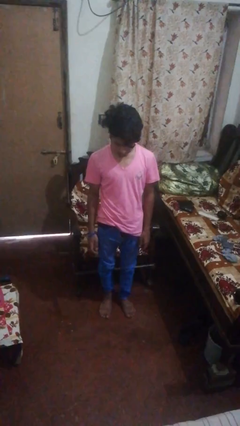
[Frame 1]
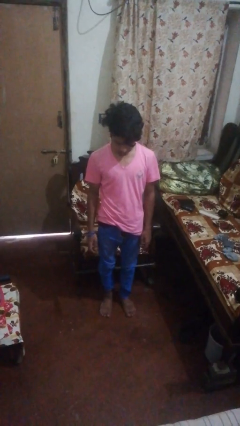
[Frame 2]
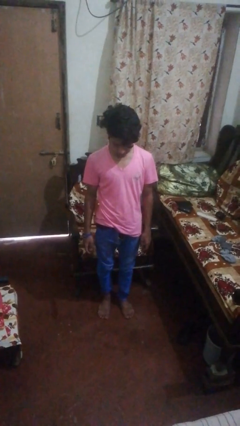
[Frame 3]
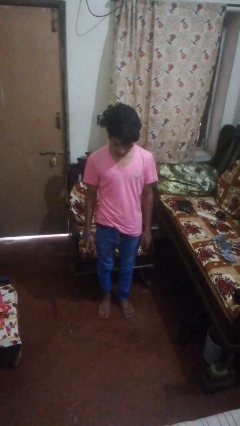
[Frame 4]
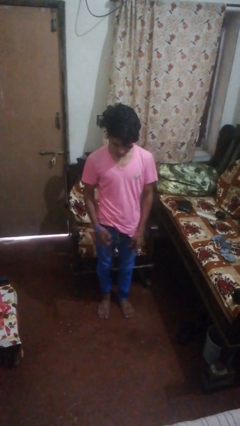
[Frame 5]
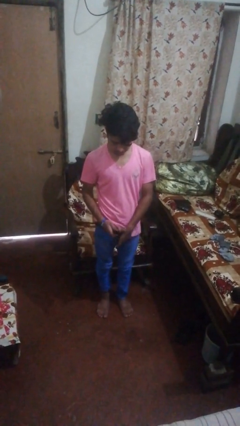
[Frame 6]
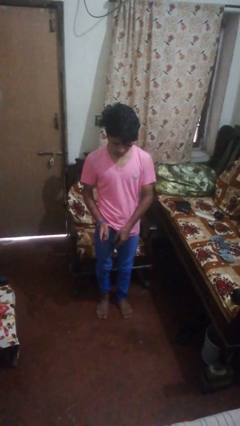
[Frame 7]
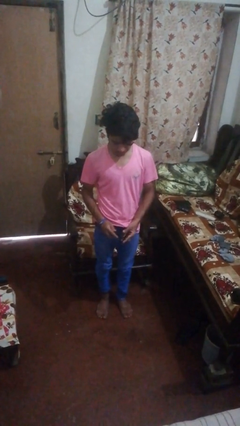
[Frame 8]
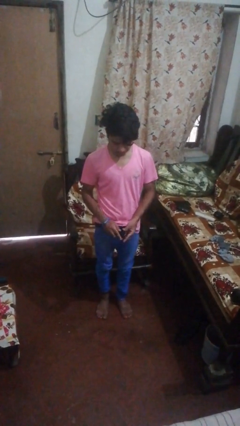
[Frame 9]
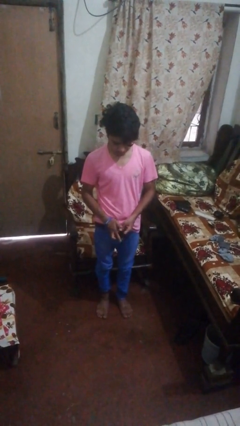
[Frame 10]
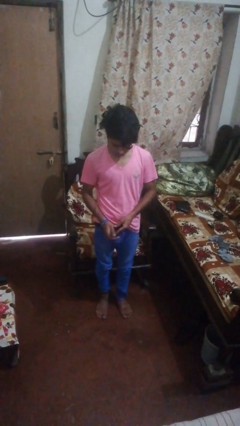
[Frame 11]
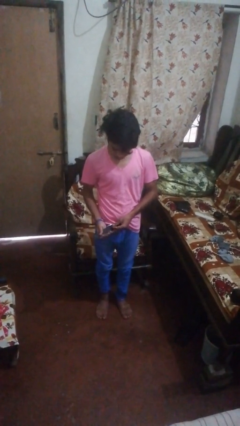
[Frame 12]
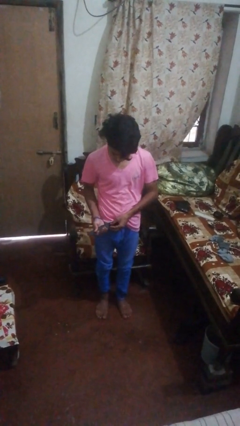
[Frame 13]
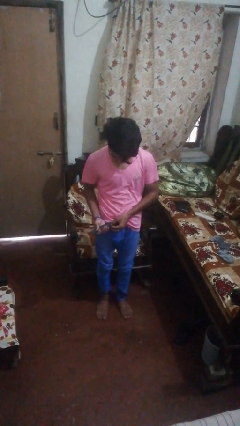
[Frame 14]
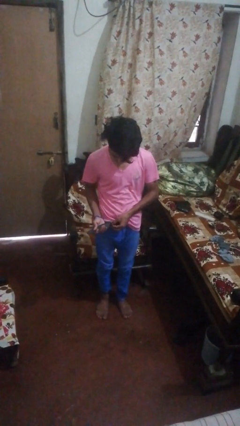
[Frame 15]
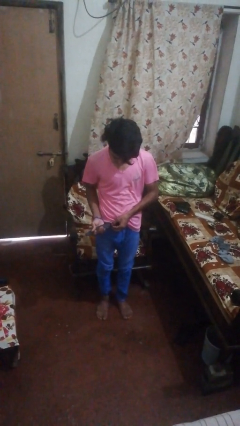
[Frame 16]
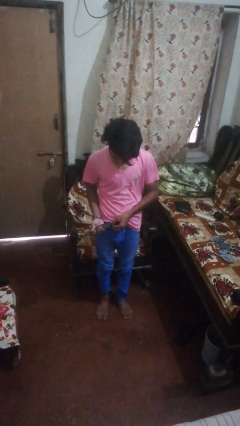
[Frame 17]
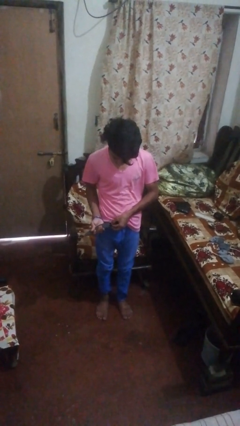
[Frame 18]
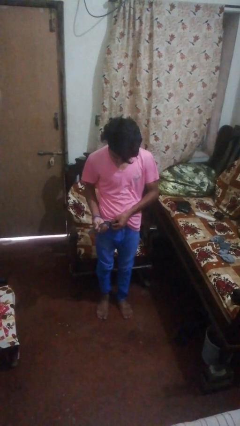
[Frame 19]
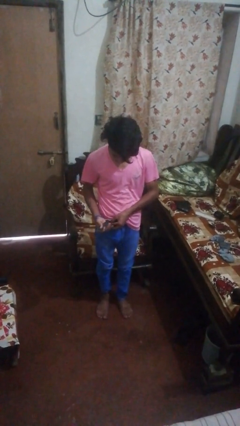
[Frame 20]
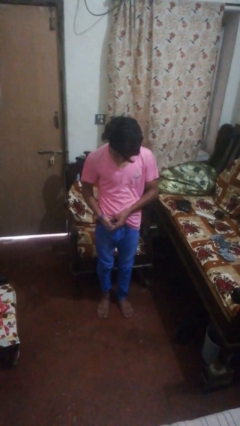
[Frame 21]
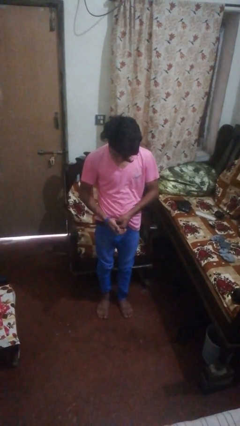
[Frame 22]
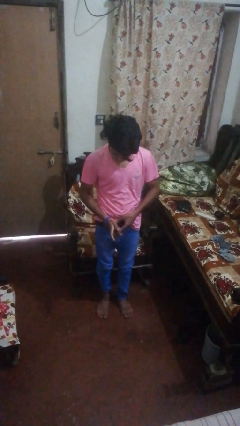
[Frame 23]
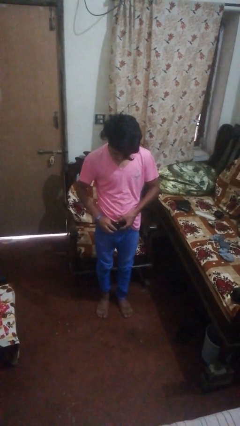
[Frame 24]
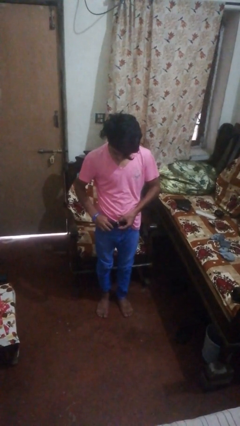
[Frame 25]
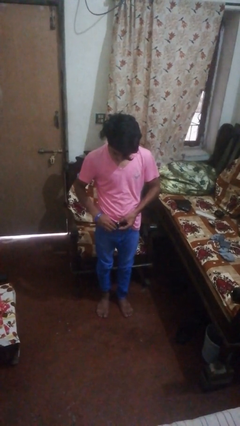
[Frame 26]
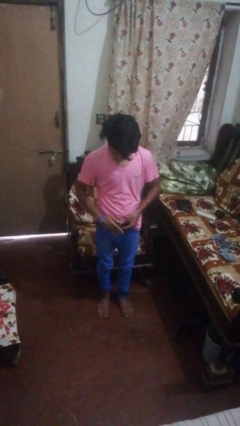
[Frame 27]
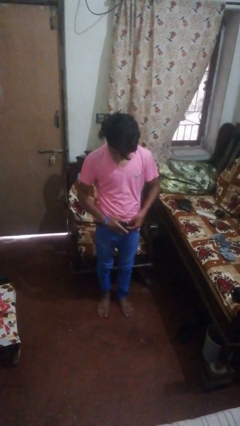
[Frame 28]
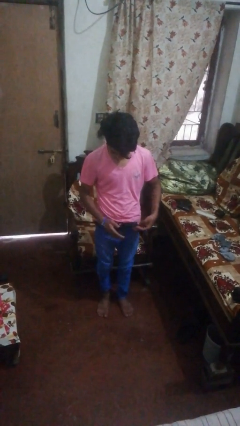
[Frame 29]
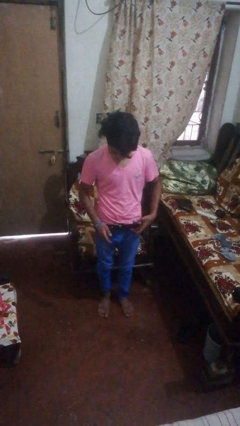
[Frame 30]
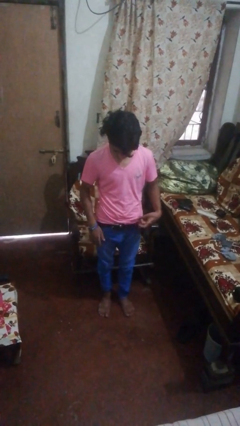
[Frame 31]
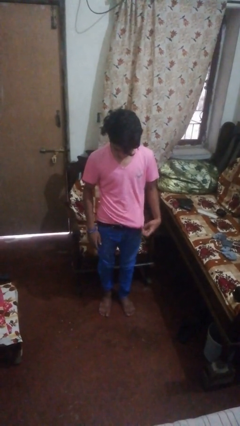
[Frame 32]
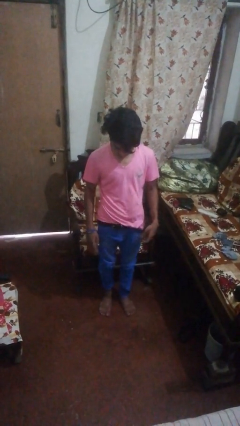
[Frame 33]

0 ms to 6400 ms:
person puts on belt

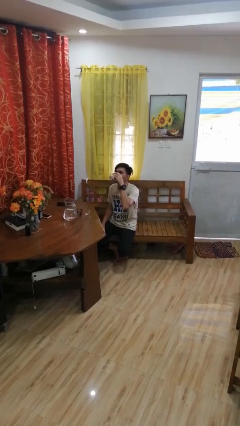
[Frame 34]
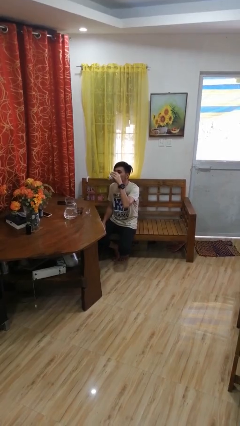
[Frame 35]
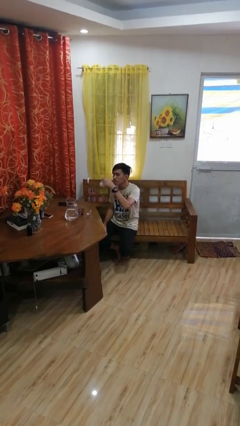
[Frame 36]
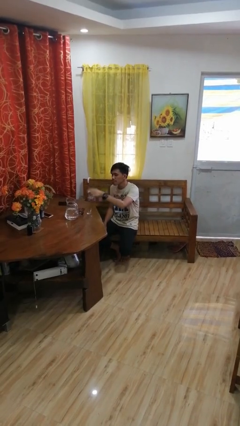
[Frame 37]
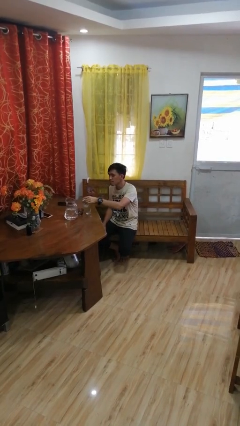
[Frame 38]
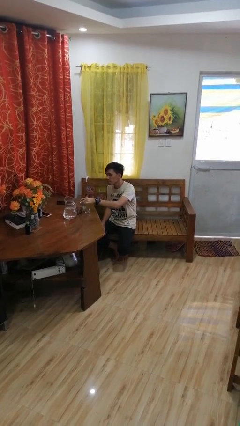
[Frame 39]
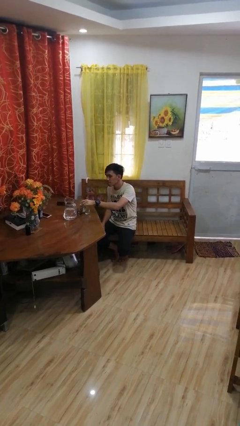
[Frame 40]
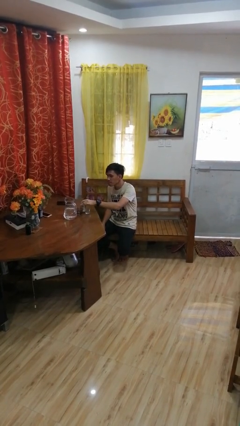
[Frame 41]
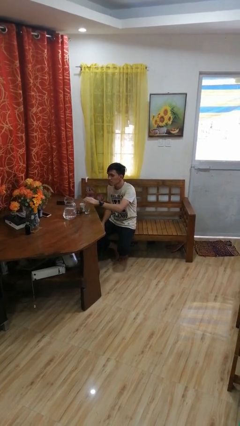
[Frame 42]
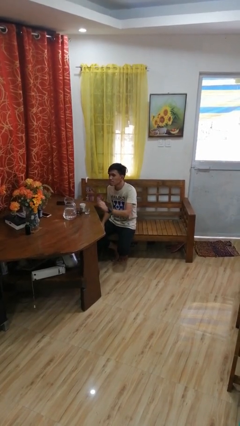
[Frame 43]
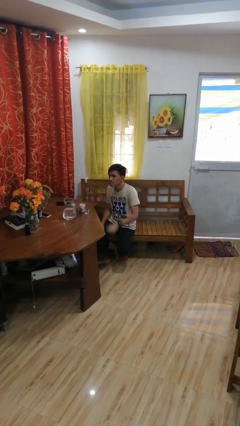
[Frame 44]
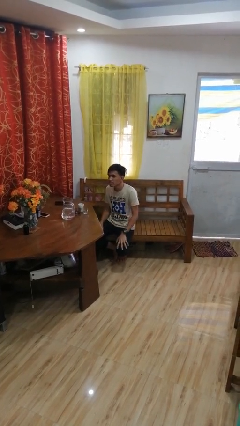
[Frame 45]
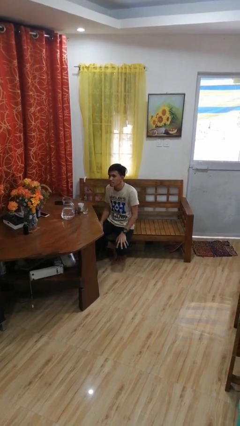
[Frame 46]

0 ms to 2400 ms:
person puts down object on table

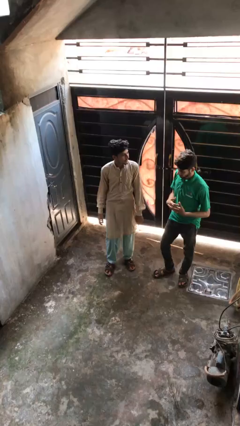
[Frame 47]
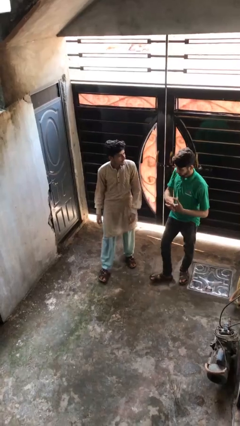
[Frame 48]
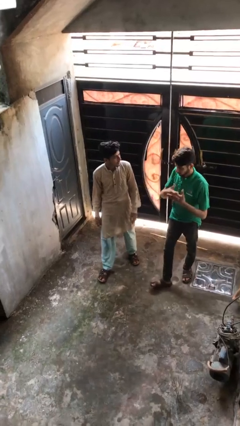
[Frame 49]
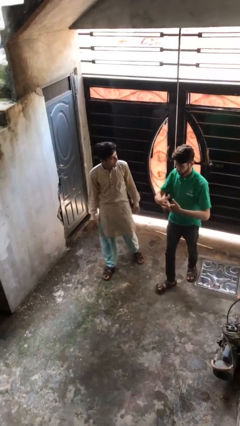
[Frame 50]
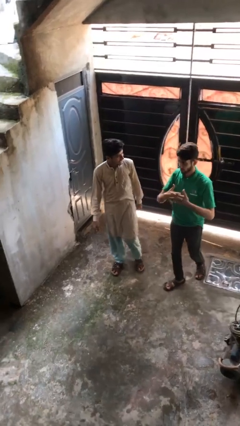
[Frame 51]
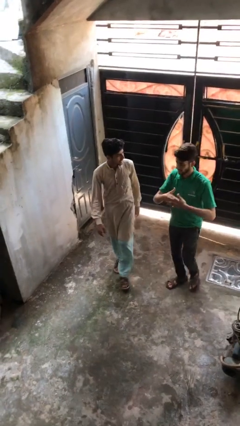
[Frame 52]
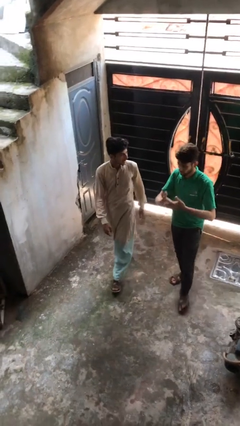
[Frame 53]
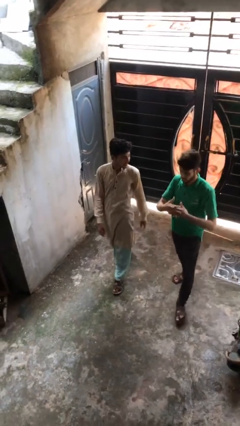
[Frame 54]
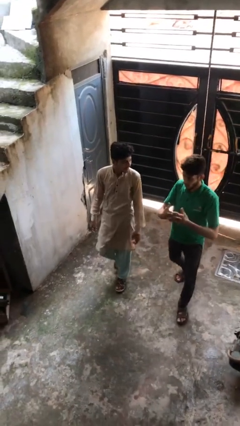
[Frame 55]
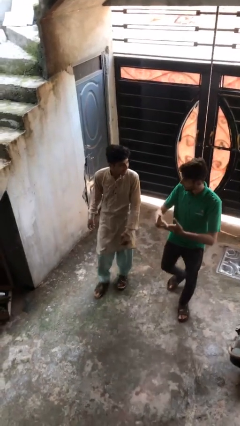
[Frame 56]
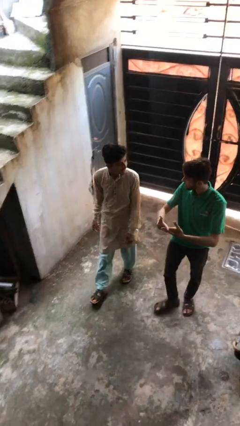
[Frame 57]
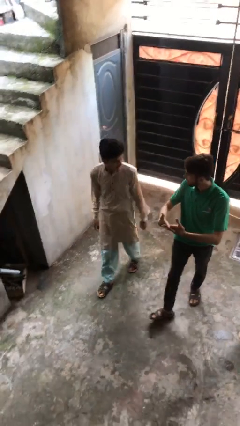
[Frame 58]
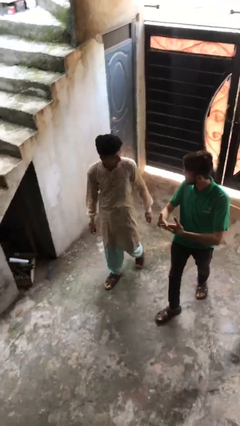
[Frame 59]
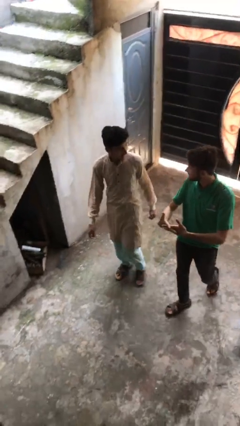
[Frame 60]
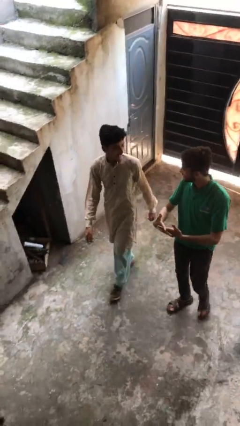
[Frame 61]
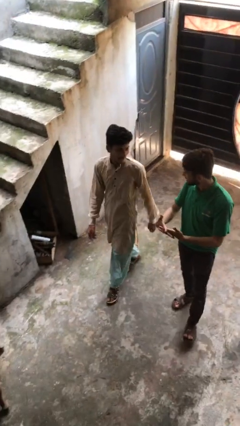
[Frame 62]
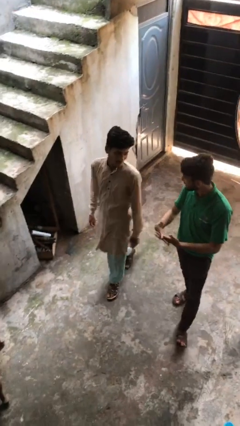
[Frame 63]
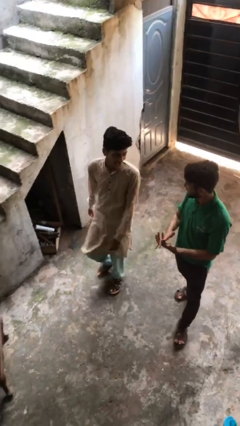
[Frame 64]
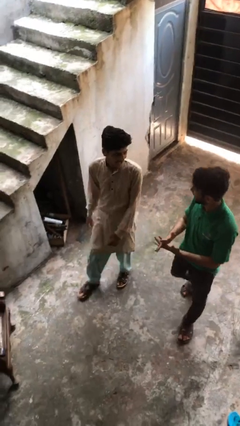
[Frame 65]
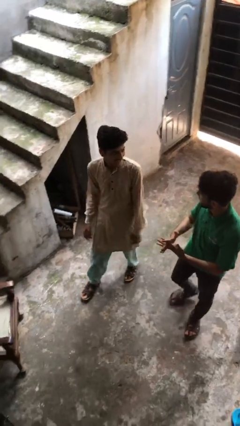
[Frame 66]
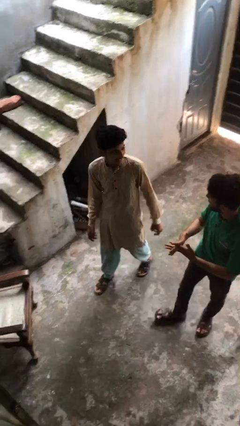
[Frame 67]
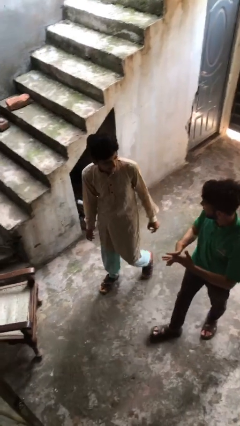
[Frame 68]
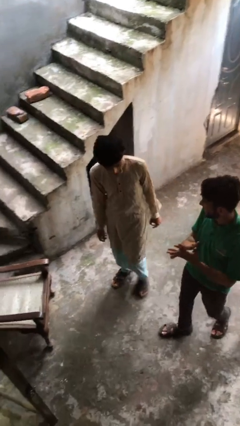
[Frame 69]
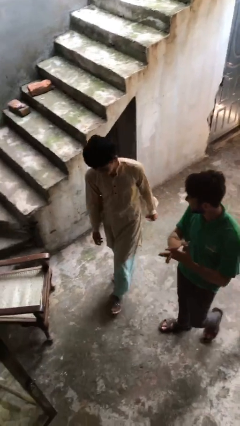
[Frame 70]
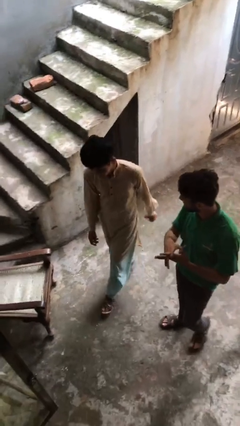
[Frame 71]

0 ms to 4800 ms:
person talks to person

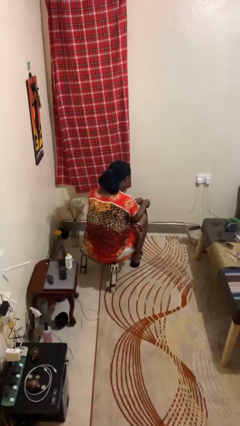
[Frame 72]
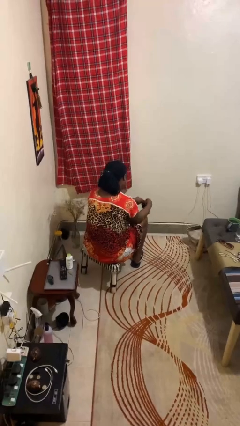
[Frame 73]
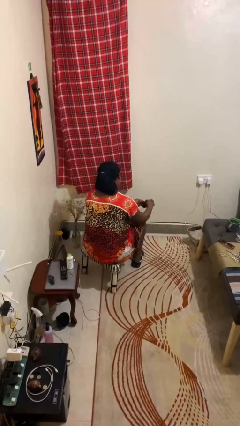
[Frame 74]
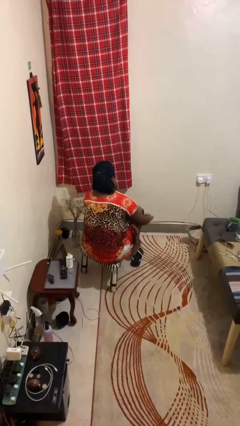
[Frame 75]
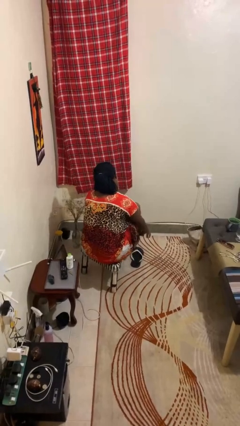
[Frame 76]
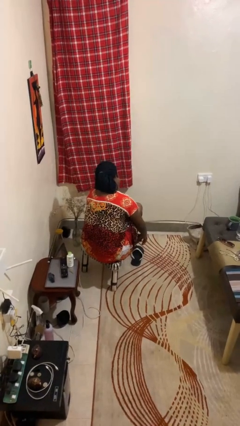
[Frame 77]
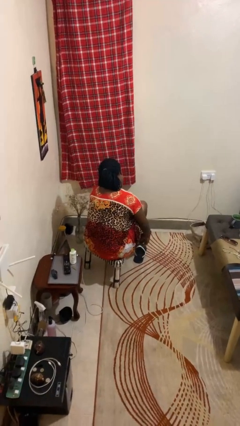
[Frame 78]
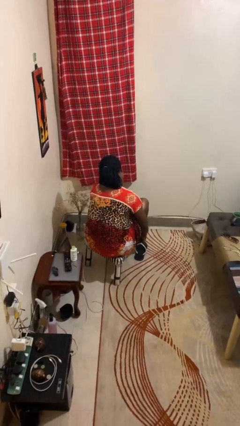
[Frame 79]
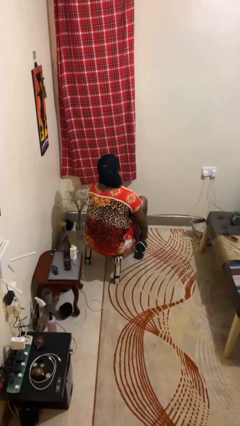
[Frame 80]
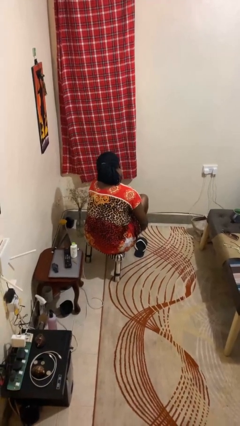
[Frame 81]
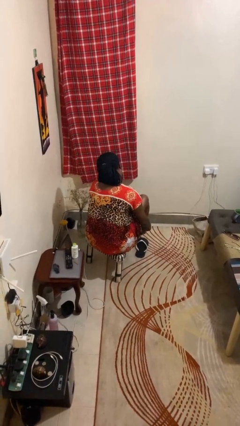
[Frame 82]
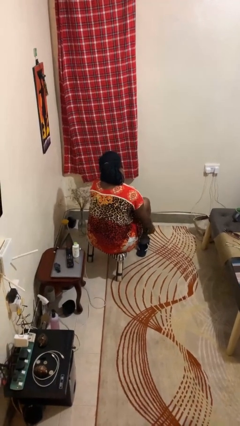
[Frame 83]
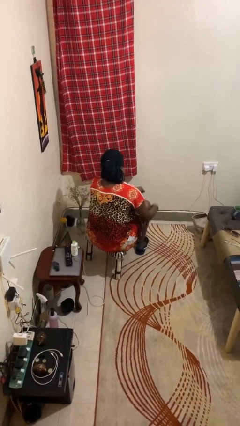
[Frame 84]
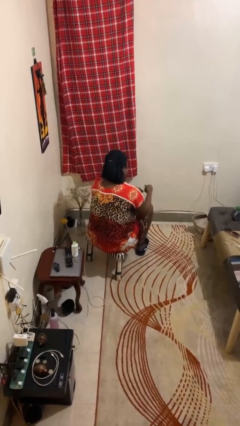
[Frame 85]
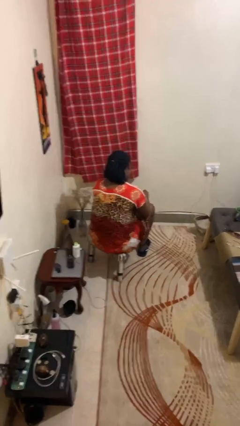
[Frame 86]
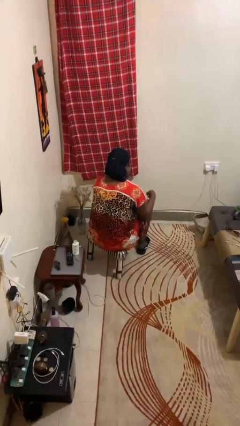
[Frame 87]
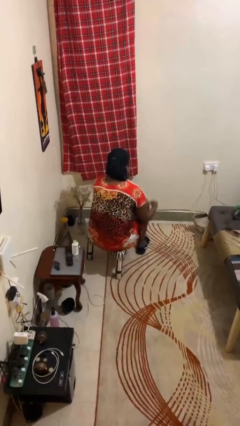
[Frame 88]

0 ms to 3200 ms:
person puts on socks

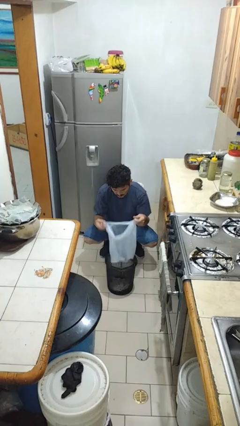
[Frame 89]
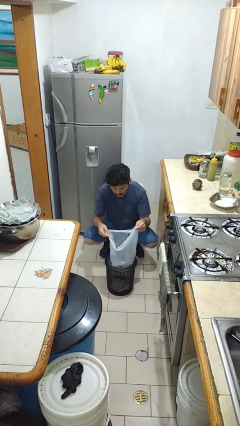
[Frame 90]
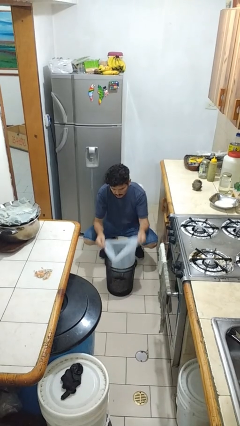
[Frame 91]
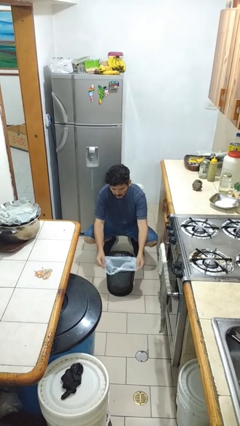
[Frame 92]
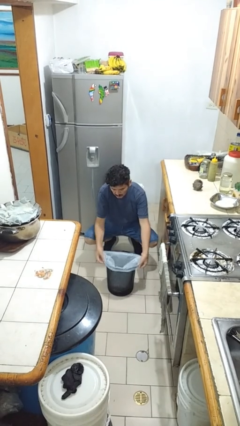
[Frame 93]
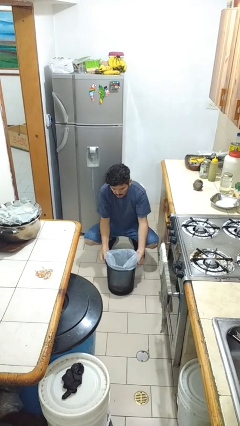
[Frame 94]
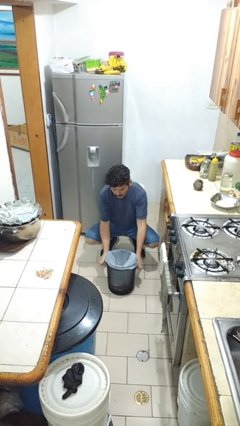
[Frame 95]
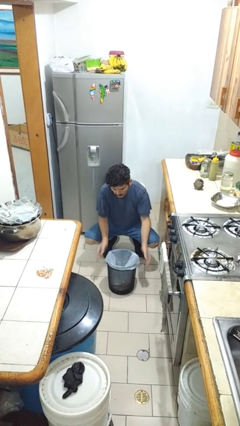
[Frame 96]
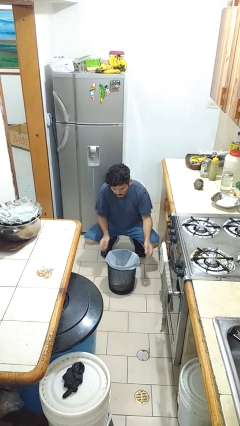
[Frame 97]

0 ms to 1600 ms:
person inserts trashbag into trashcan
